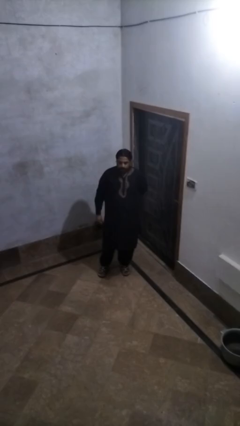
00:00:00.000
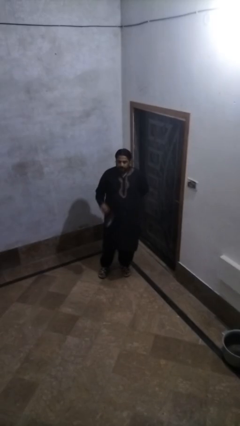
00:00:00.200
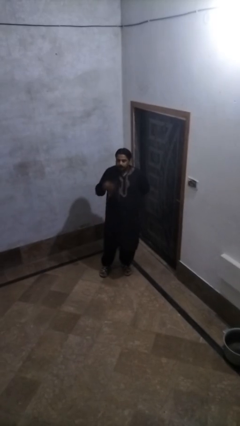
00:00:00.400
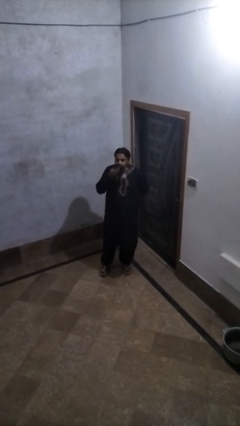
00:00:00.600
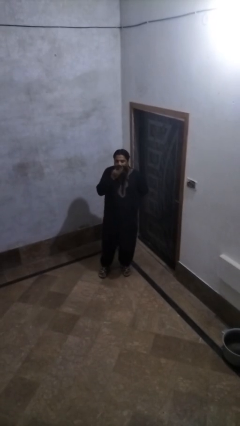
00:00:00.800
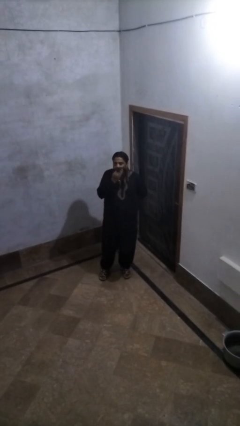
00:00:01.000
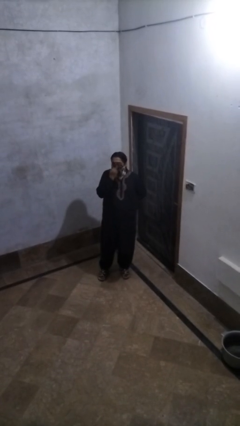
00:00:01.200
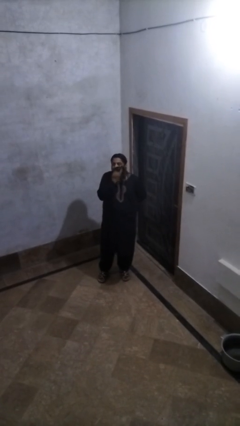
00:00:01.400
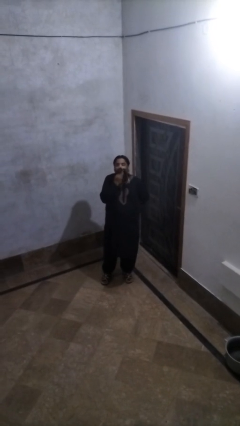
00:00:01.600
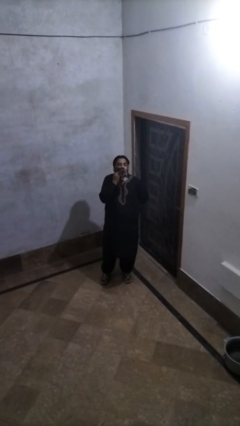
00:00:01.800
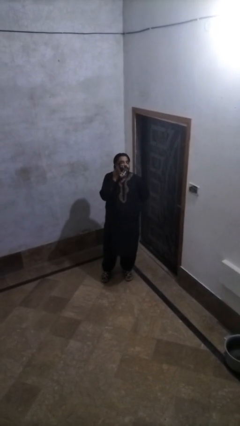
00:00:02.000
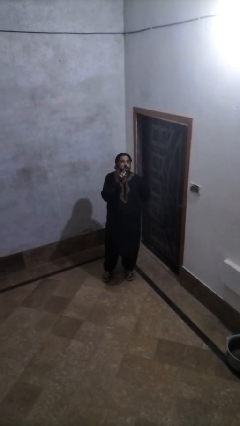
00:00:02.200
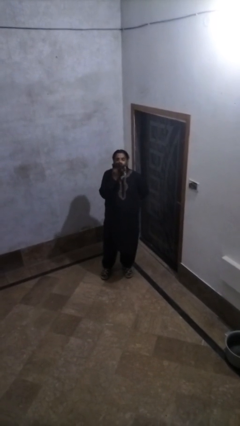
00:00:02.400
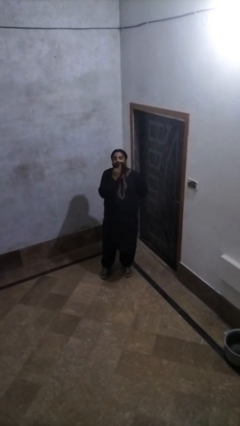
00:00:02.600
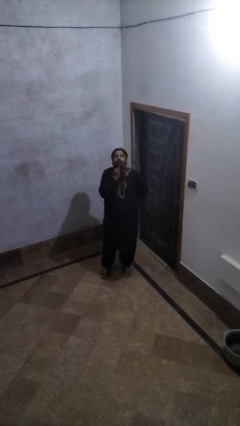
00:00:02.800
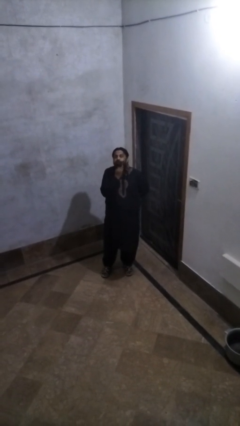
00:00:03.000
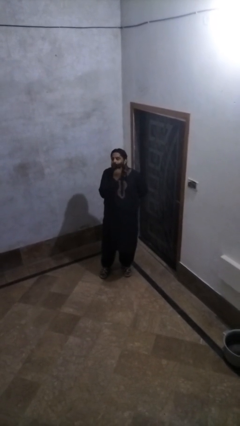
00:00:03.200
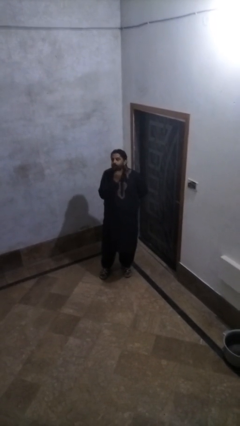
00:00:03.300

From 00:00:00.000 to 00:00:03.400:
person wipes mouth with napkin

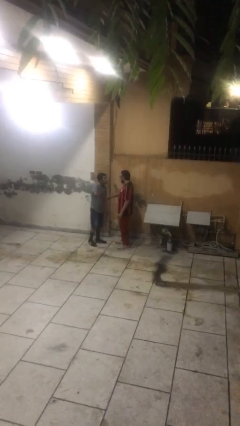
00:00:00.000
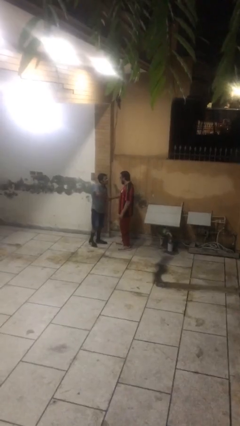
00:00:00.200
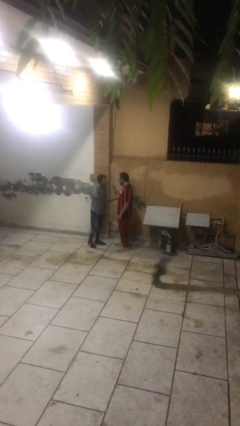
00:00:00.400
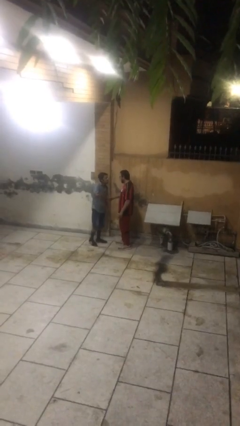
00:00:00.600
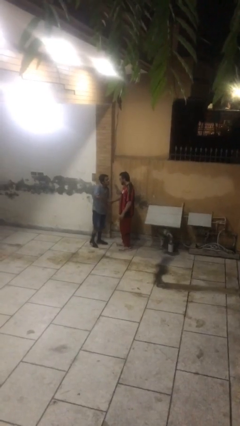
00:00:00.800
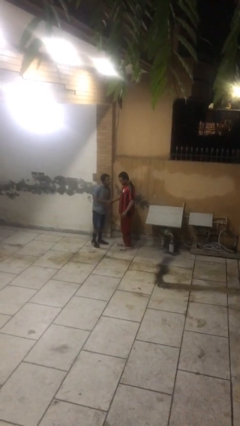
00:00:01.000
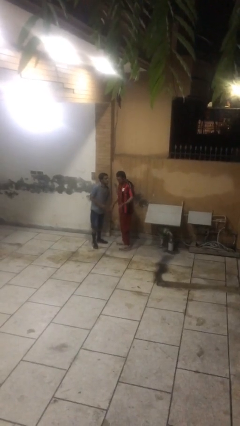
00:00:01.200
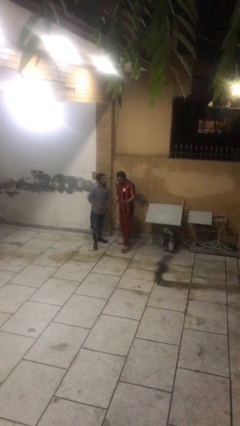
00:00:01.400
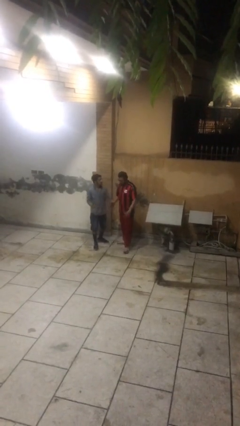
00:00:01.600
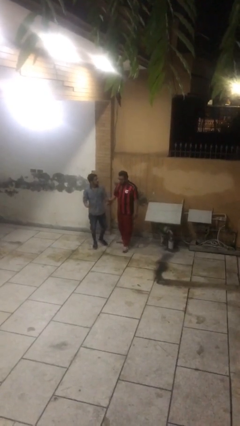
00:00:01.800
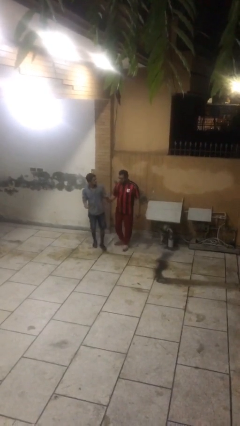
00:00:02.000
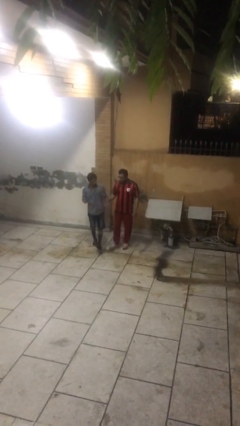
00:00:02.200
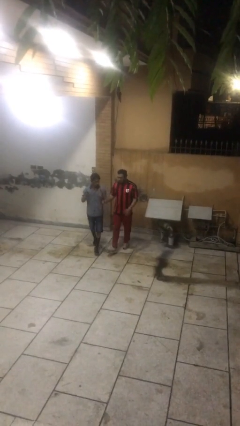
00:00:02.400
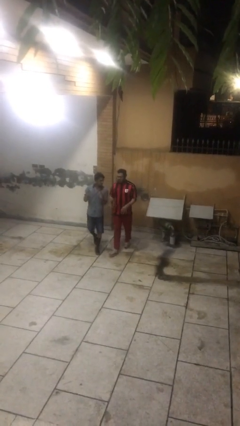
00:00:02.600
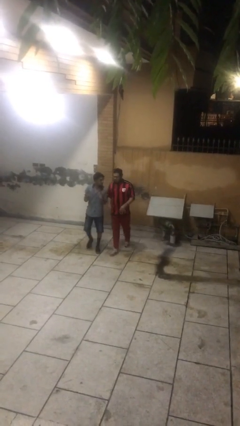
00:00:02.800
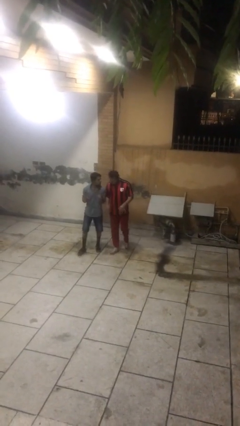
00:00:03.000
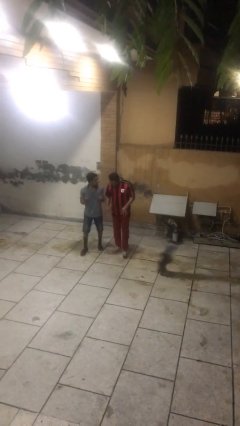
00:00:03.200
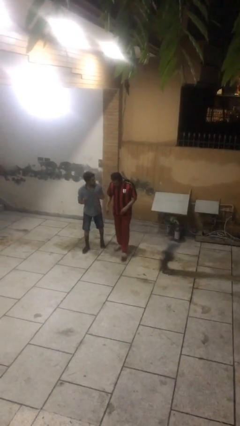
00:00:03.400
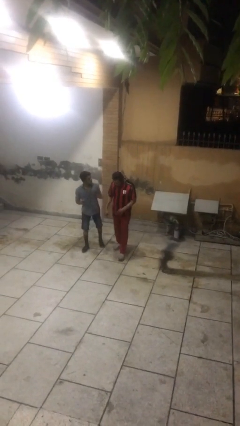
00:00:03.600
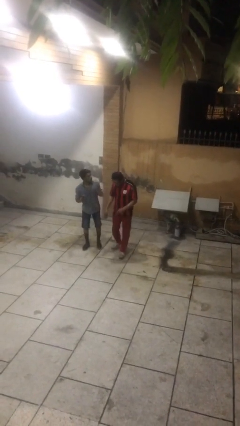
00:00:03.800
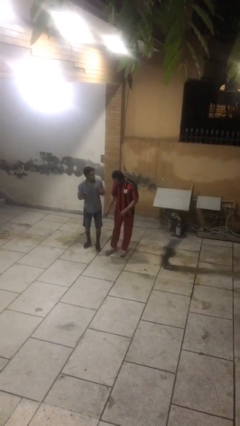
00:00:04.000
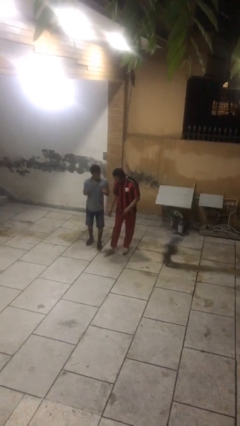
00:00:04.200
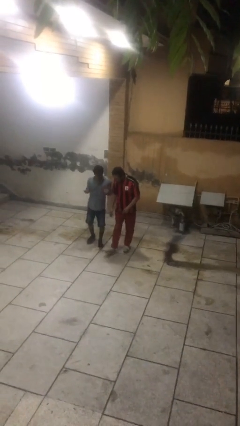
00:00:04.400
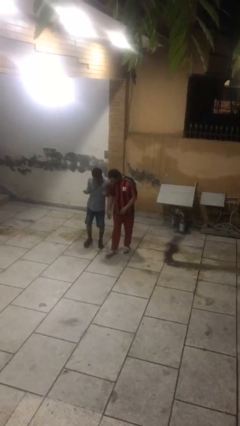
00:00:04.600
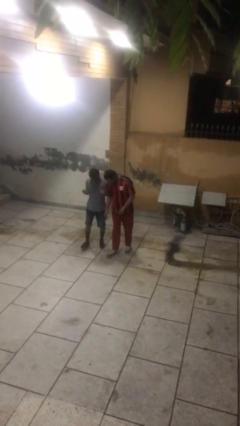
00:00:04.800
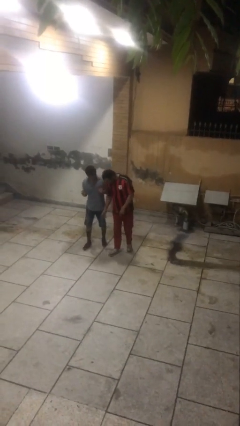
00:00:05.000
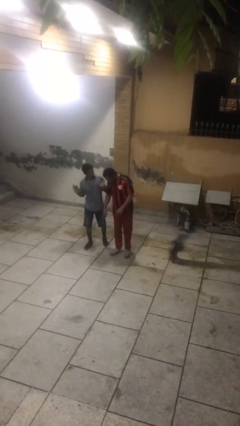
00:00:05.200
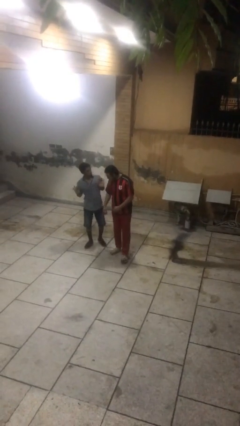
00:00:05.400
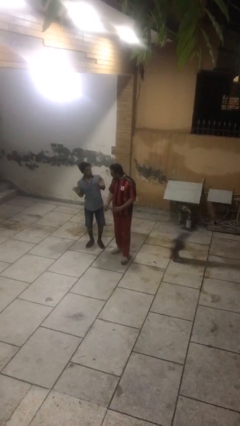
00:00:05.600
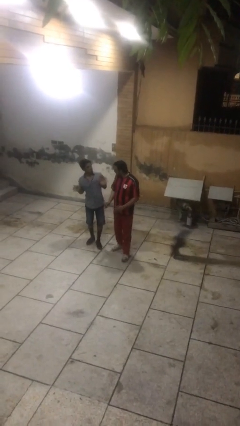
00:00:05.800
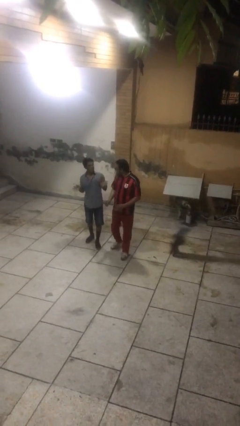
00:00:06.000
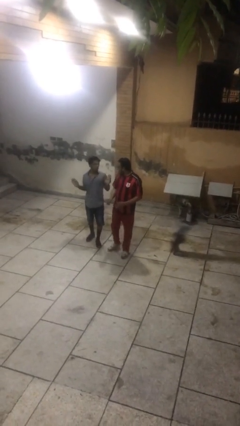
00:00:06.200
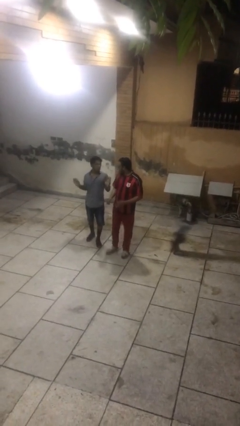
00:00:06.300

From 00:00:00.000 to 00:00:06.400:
person talks to person

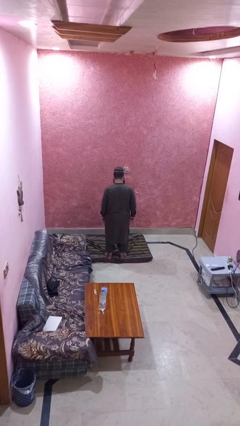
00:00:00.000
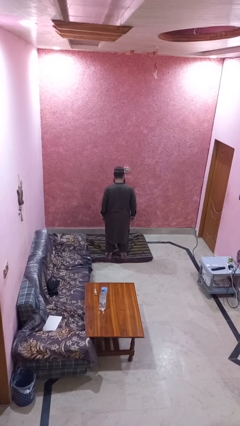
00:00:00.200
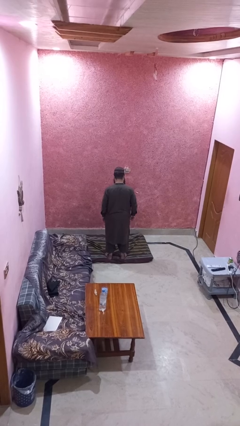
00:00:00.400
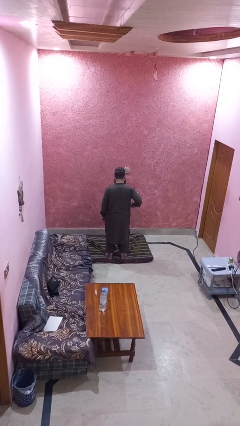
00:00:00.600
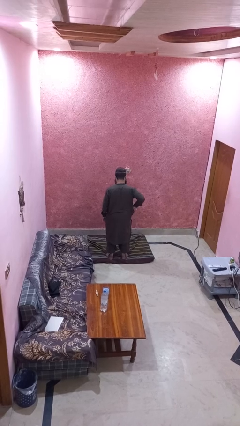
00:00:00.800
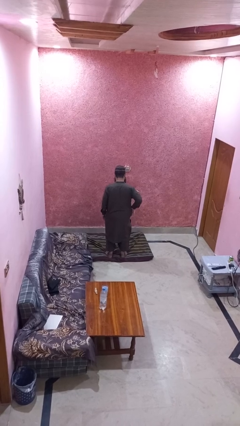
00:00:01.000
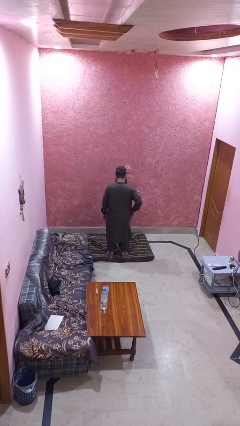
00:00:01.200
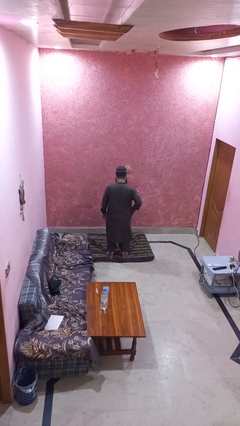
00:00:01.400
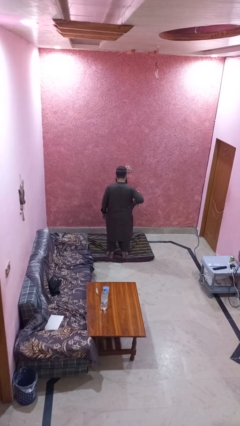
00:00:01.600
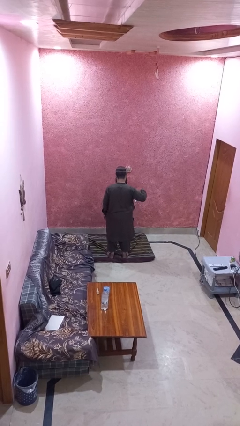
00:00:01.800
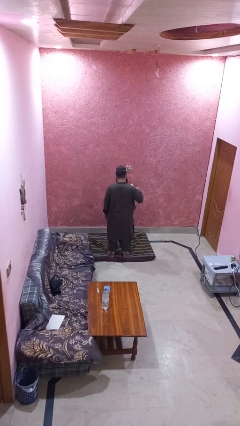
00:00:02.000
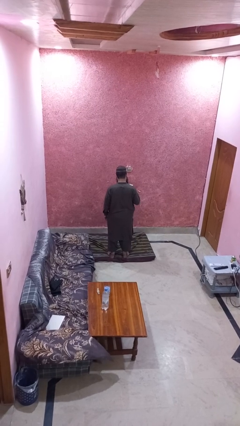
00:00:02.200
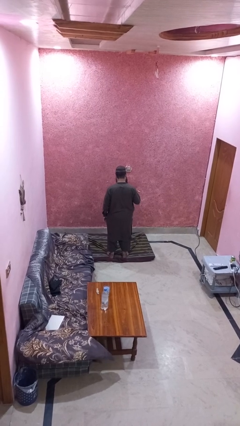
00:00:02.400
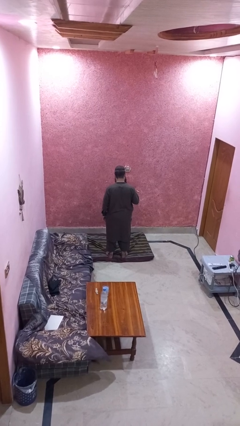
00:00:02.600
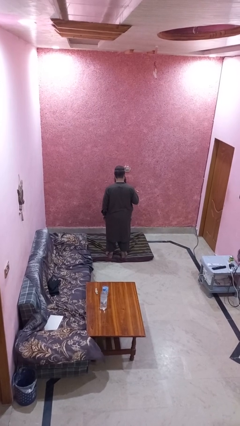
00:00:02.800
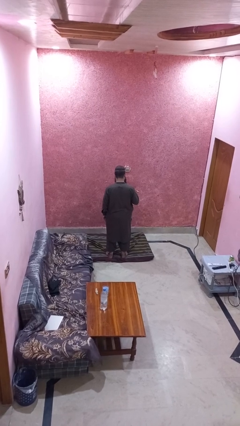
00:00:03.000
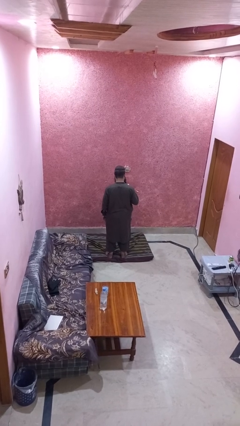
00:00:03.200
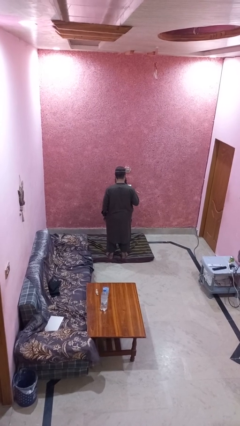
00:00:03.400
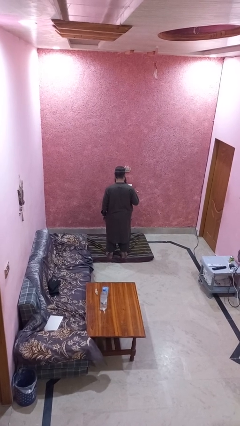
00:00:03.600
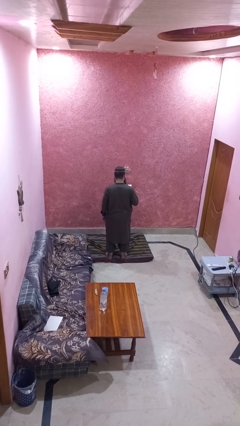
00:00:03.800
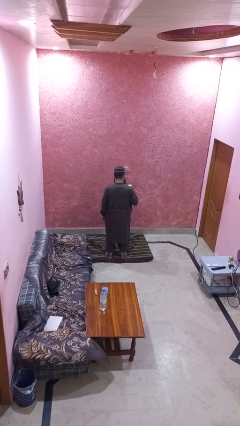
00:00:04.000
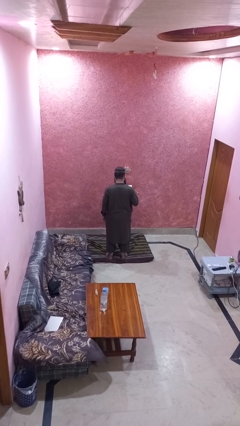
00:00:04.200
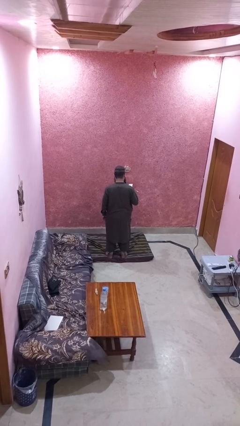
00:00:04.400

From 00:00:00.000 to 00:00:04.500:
person takes phone from pocket

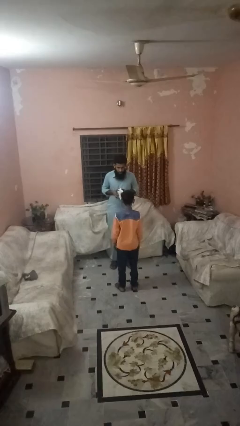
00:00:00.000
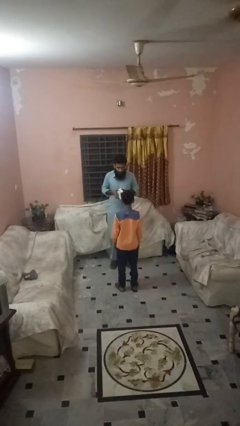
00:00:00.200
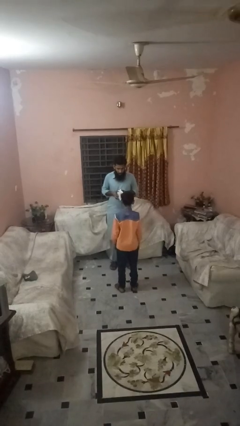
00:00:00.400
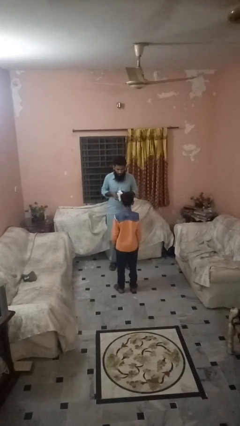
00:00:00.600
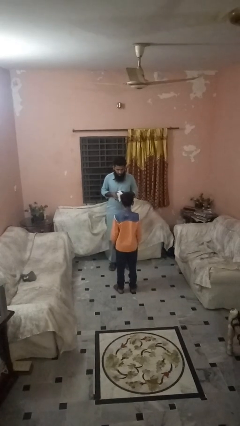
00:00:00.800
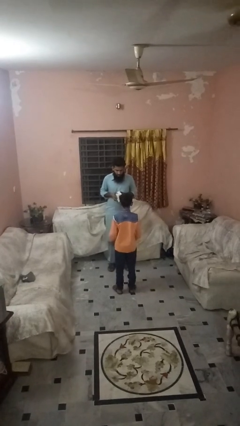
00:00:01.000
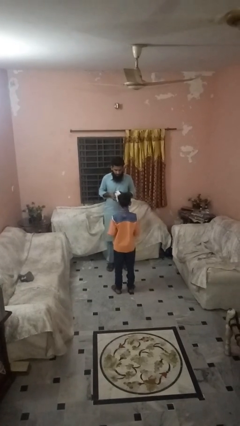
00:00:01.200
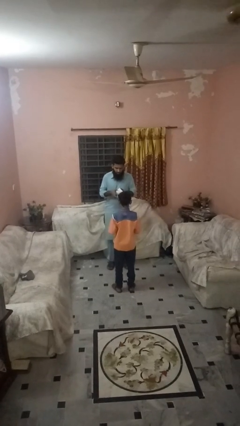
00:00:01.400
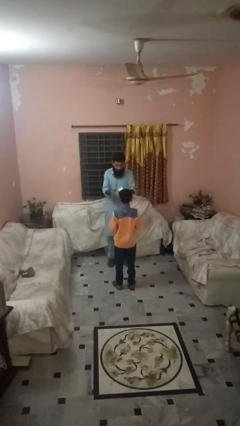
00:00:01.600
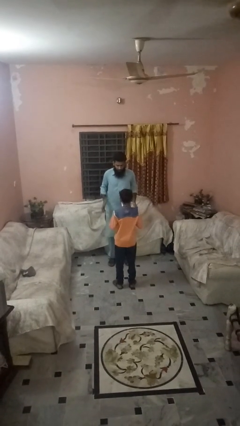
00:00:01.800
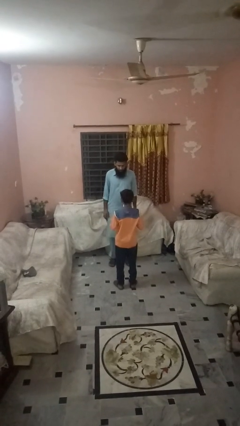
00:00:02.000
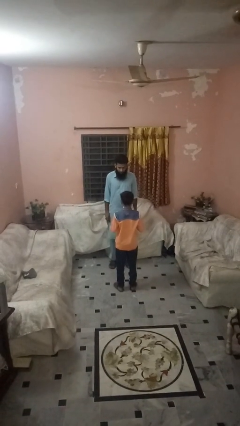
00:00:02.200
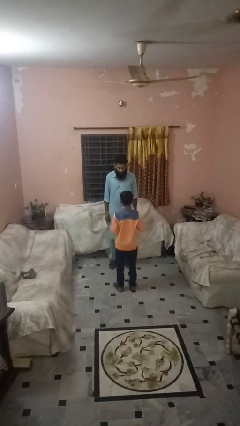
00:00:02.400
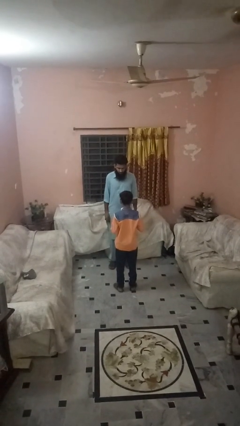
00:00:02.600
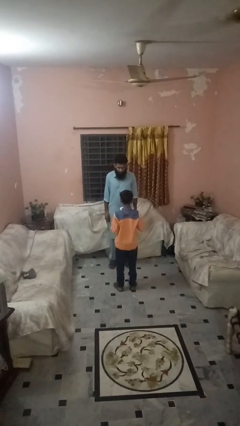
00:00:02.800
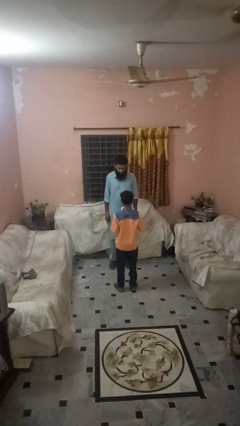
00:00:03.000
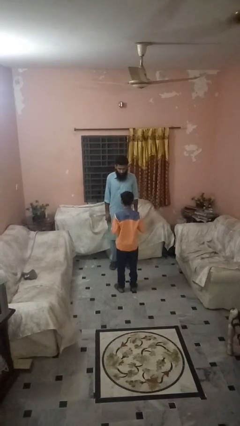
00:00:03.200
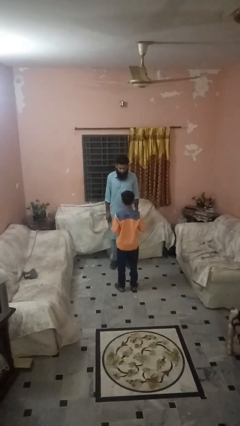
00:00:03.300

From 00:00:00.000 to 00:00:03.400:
person throws object to person
